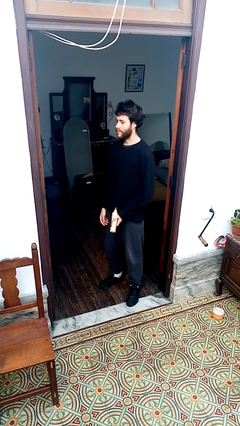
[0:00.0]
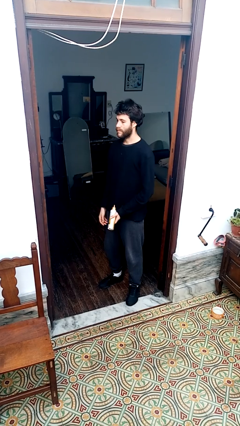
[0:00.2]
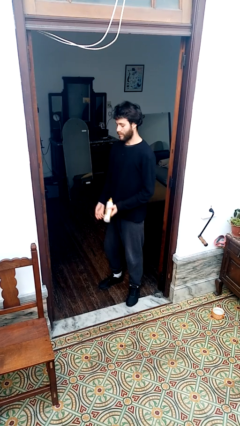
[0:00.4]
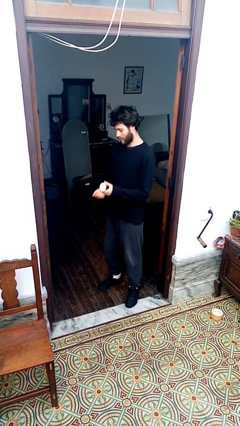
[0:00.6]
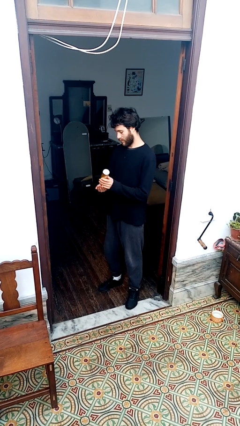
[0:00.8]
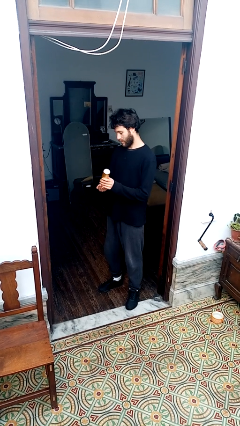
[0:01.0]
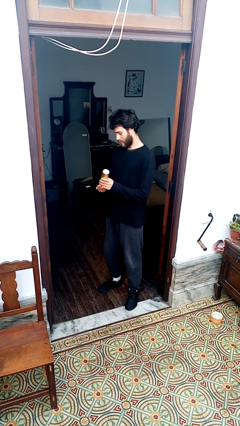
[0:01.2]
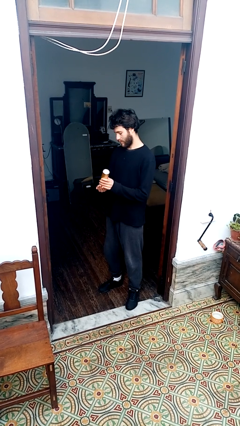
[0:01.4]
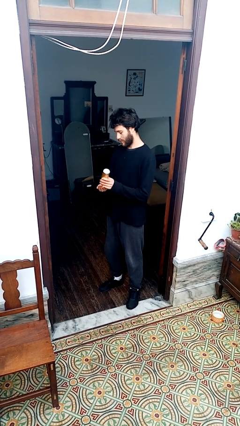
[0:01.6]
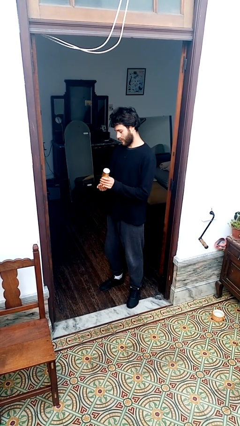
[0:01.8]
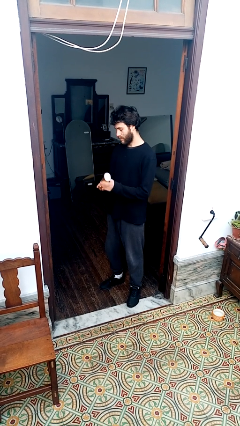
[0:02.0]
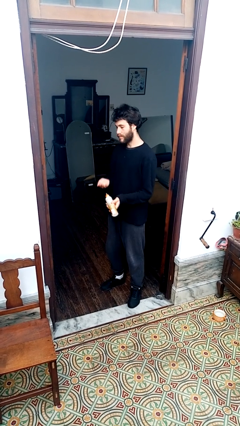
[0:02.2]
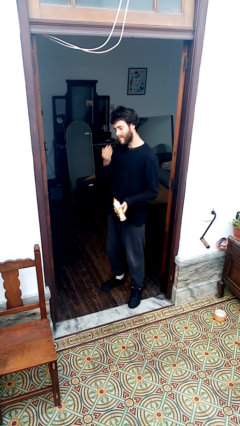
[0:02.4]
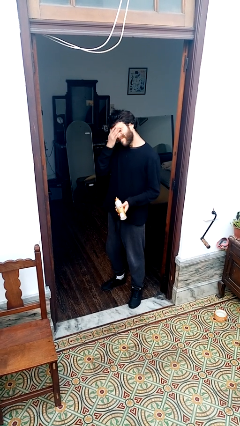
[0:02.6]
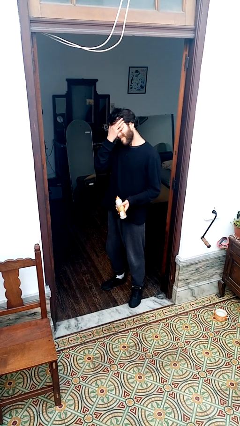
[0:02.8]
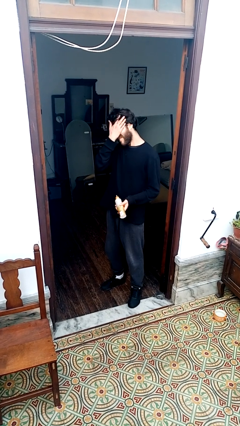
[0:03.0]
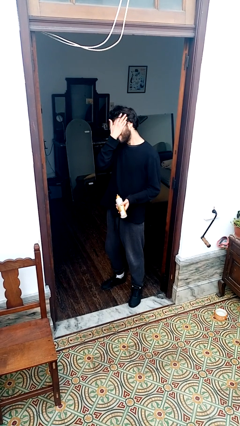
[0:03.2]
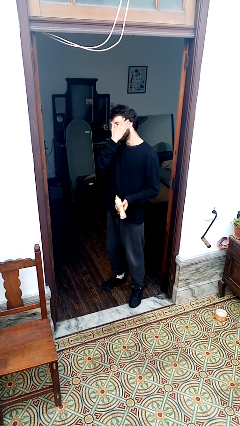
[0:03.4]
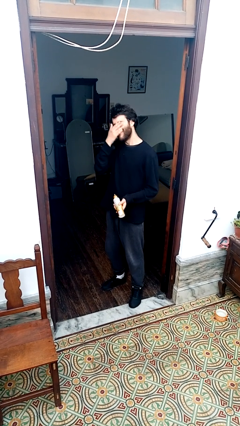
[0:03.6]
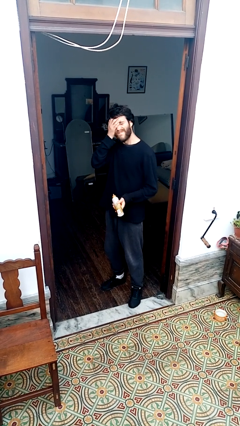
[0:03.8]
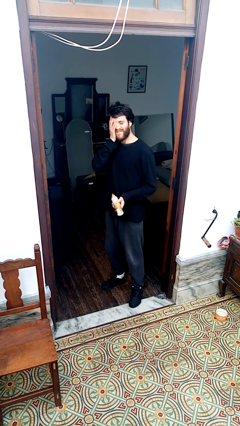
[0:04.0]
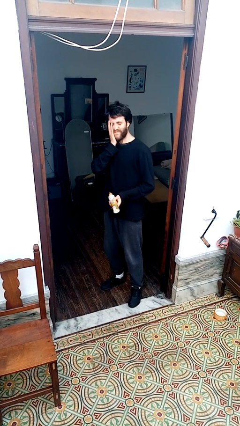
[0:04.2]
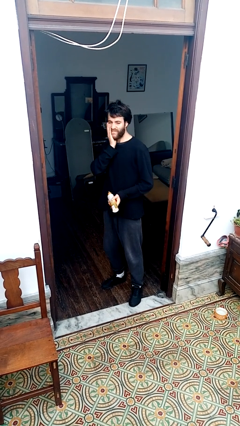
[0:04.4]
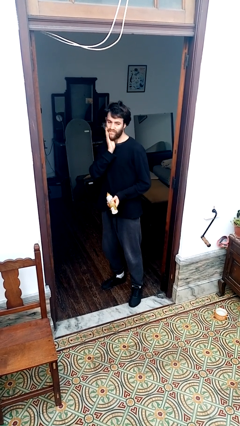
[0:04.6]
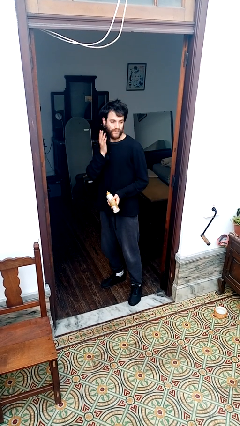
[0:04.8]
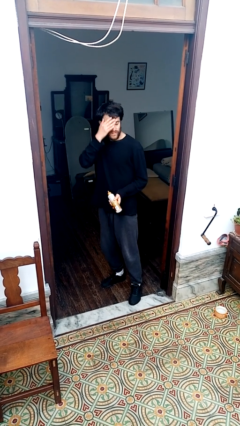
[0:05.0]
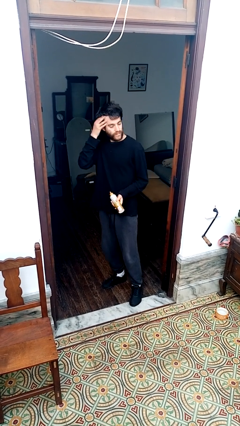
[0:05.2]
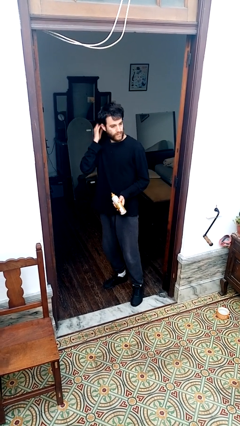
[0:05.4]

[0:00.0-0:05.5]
person applies facial moisturizer

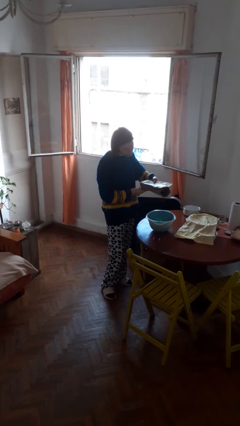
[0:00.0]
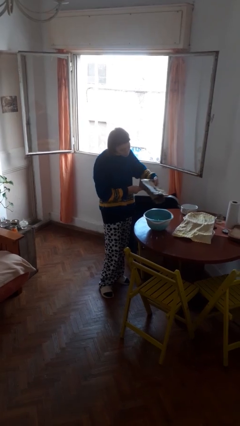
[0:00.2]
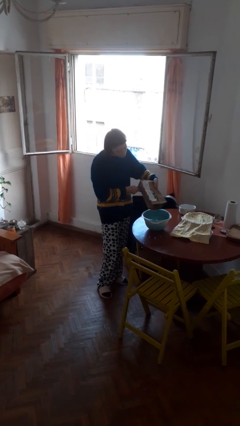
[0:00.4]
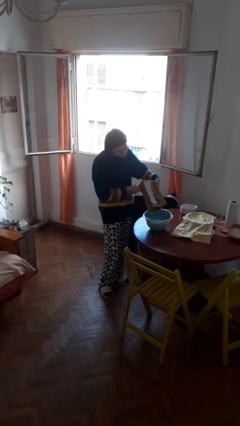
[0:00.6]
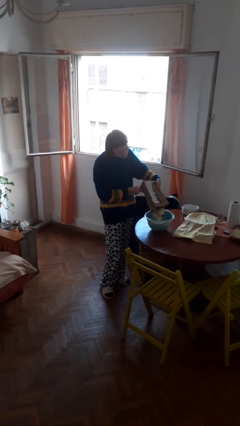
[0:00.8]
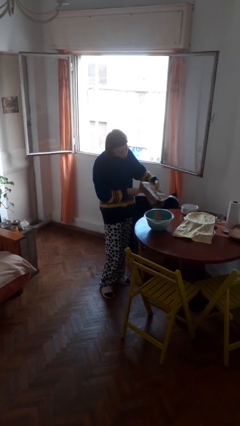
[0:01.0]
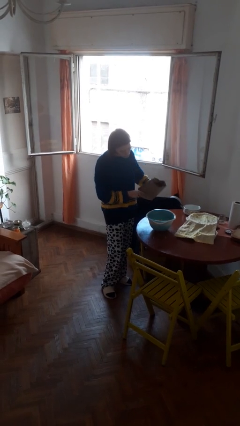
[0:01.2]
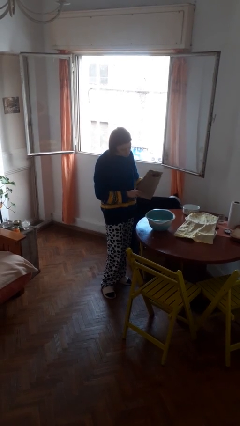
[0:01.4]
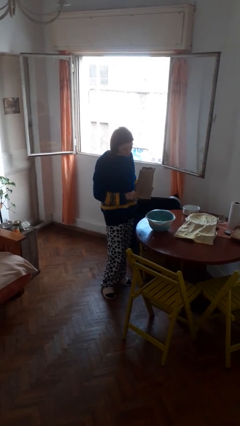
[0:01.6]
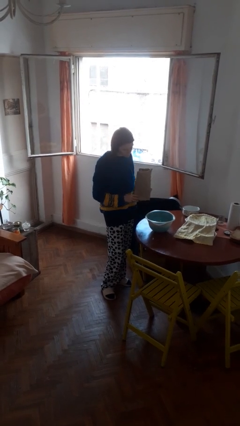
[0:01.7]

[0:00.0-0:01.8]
person pours into bowl

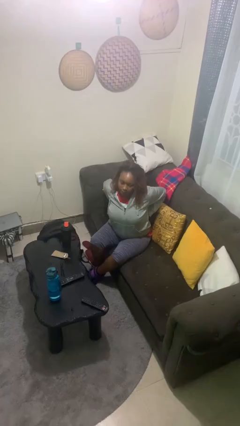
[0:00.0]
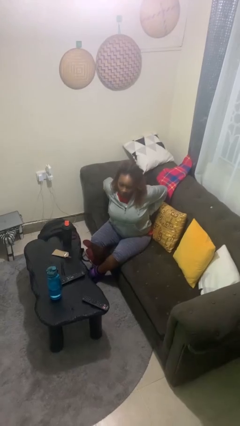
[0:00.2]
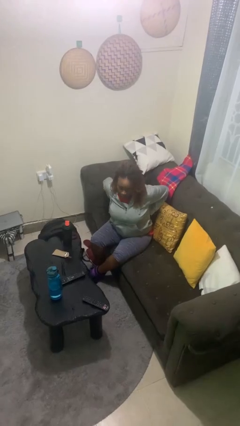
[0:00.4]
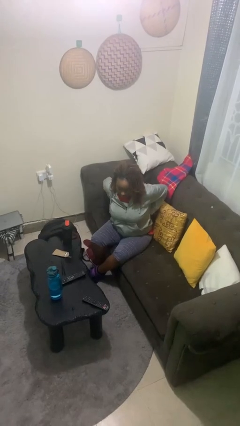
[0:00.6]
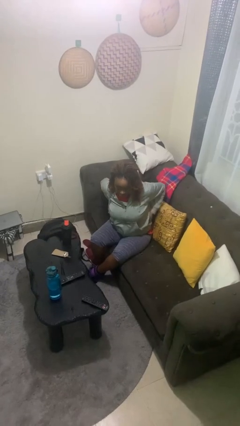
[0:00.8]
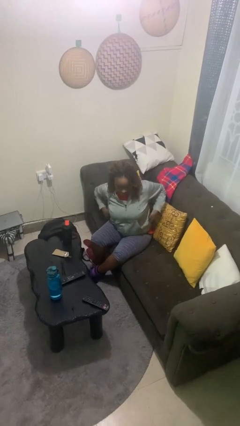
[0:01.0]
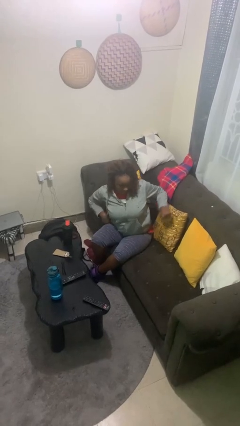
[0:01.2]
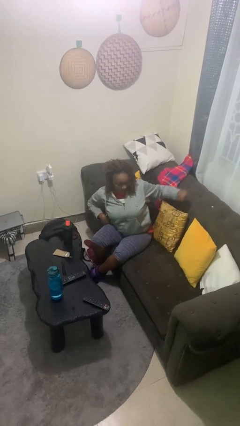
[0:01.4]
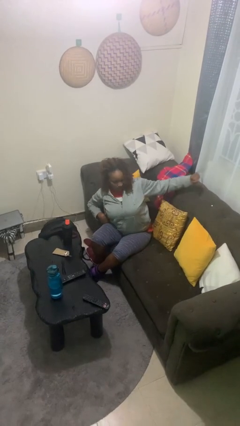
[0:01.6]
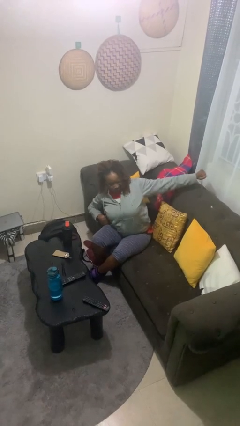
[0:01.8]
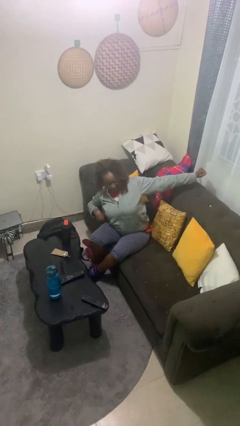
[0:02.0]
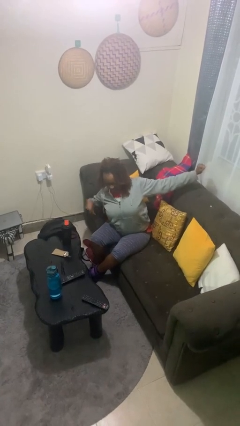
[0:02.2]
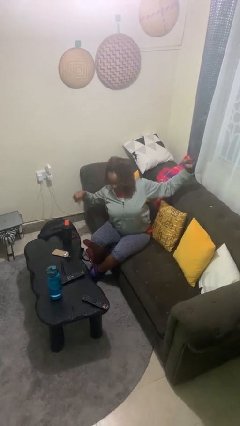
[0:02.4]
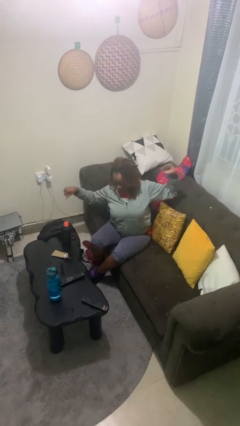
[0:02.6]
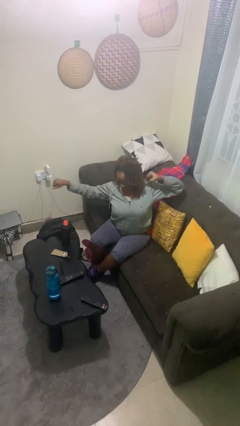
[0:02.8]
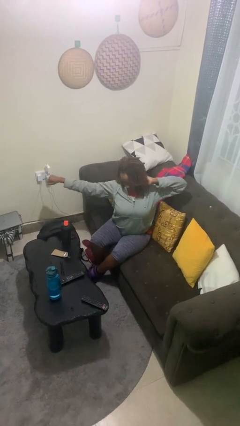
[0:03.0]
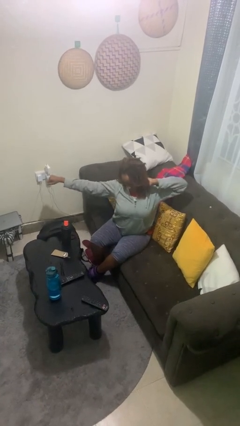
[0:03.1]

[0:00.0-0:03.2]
person stretches arms to side

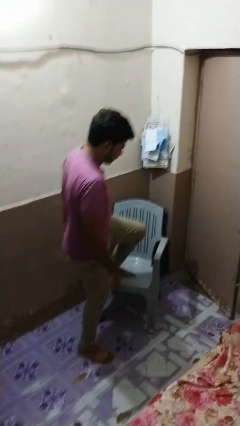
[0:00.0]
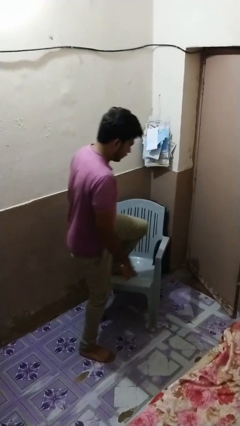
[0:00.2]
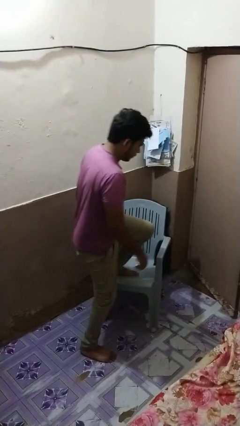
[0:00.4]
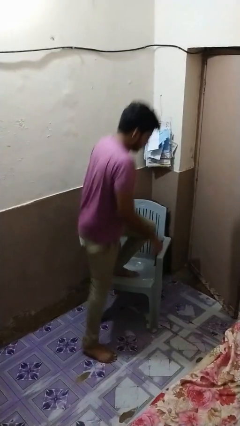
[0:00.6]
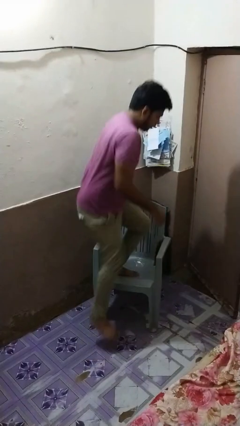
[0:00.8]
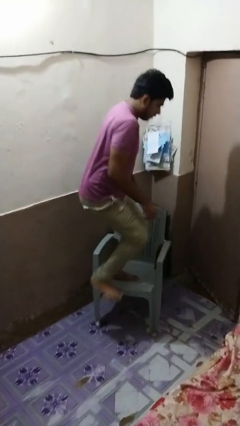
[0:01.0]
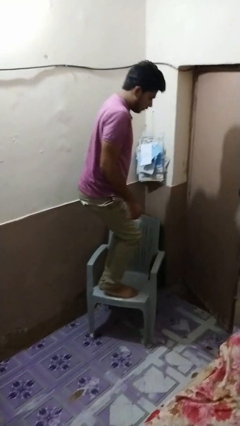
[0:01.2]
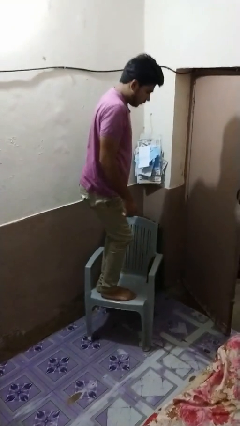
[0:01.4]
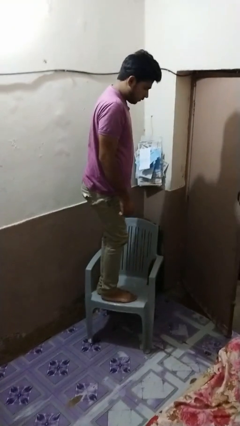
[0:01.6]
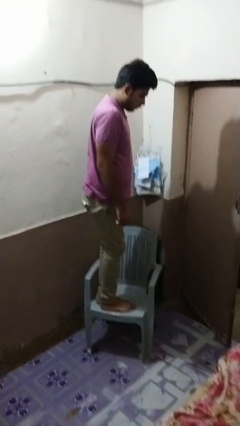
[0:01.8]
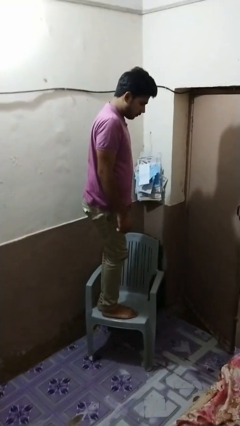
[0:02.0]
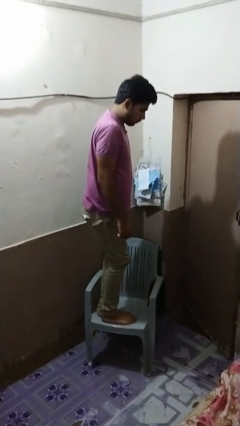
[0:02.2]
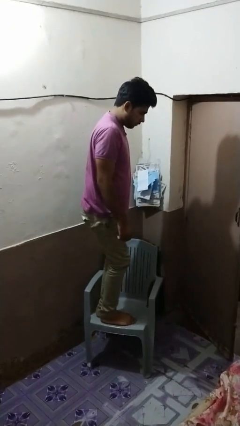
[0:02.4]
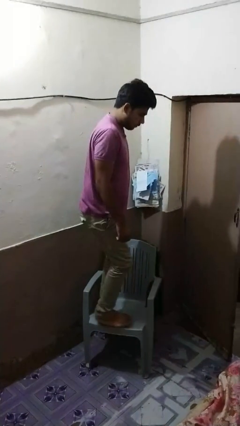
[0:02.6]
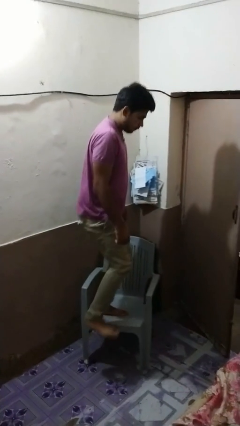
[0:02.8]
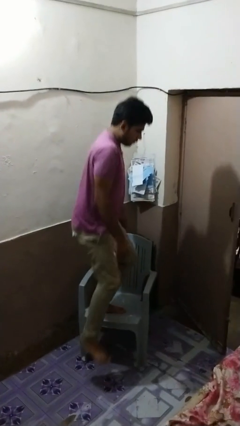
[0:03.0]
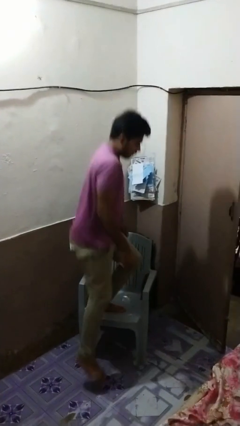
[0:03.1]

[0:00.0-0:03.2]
person climbs on chair

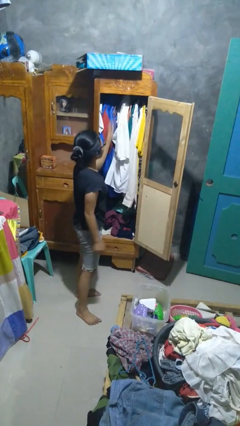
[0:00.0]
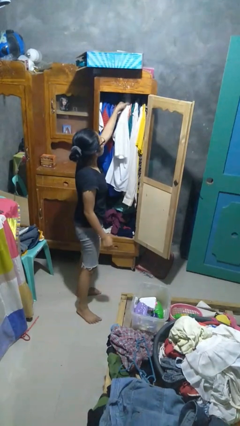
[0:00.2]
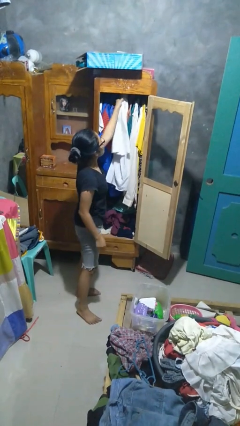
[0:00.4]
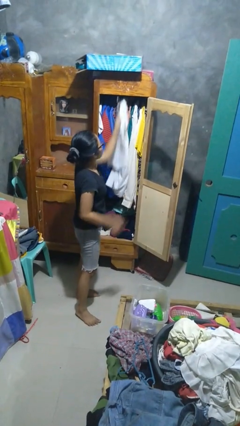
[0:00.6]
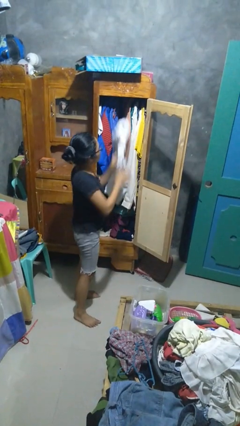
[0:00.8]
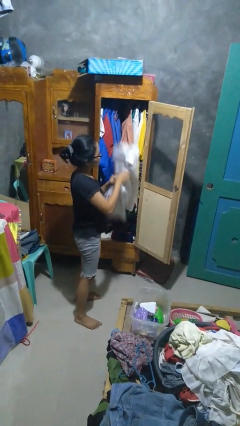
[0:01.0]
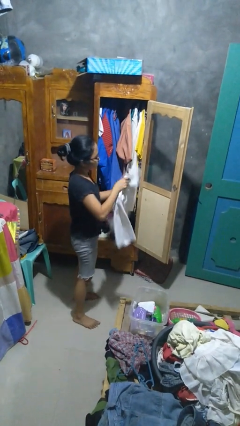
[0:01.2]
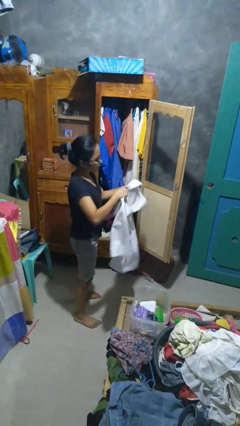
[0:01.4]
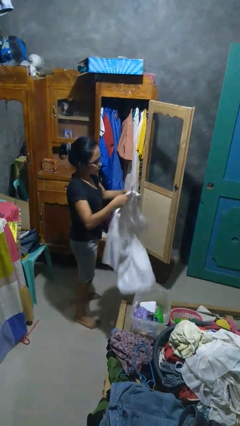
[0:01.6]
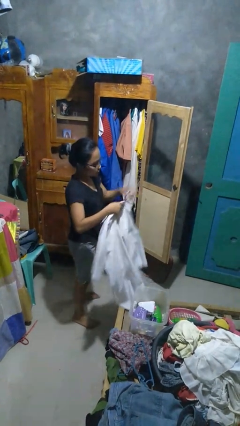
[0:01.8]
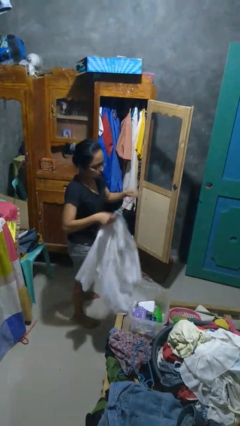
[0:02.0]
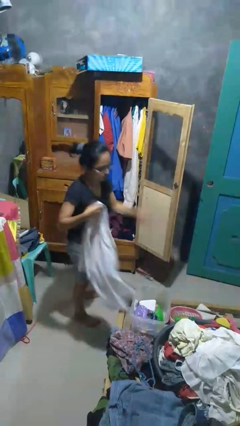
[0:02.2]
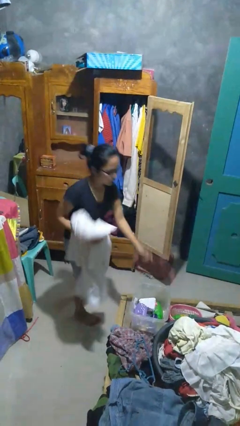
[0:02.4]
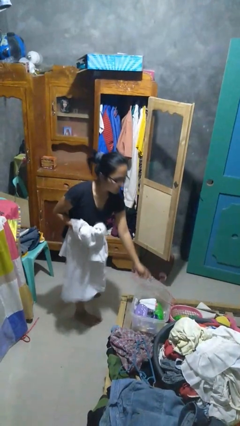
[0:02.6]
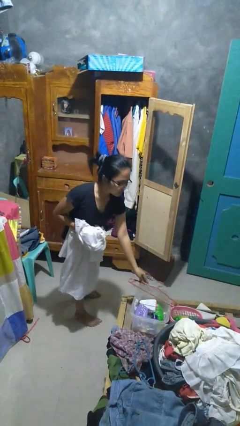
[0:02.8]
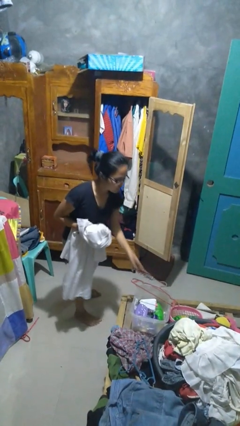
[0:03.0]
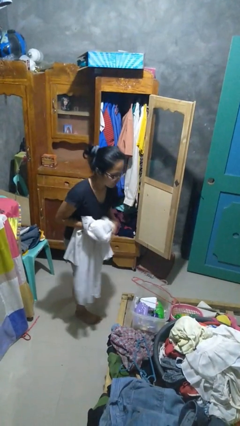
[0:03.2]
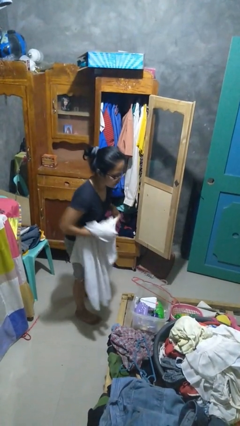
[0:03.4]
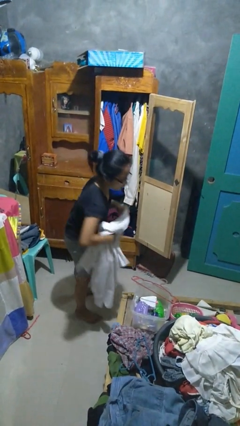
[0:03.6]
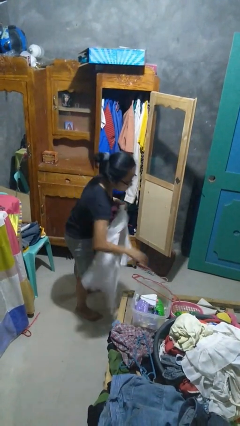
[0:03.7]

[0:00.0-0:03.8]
person takes clothes from closet
